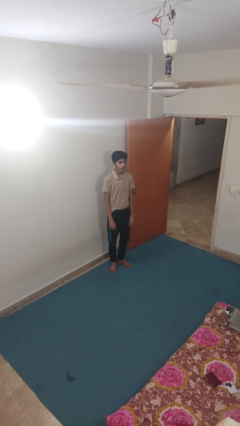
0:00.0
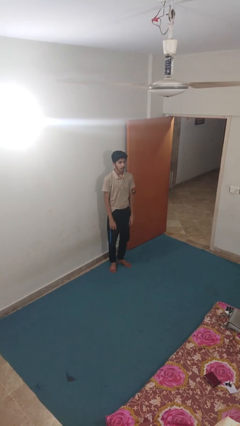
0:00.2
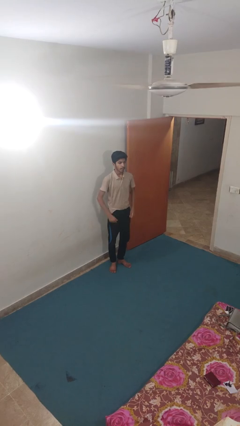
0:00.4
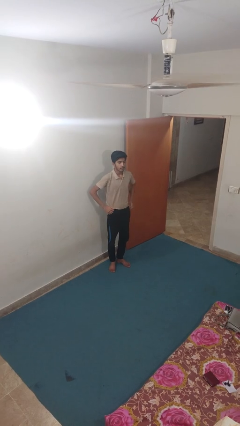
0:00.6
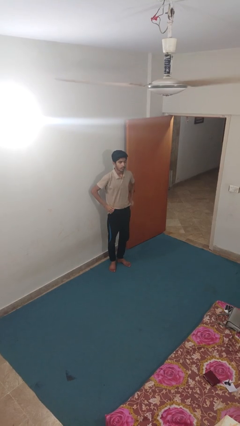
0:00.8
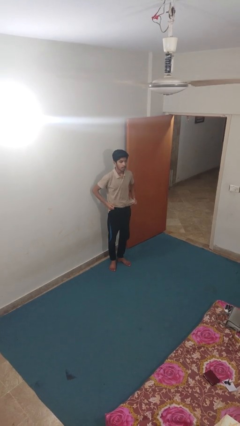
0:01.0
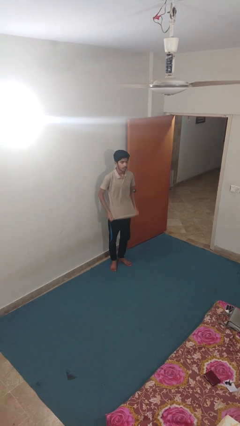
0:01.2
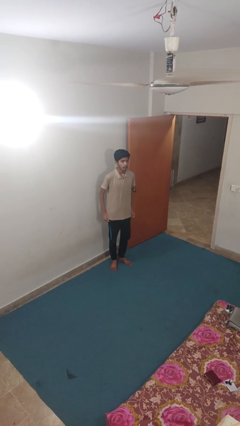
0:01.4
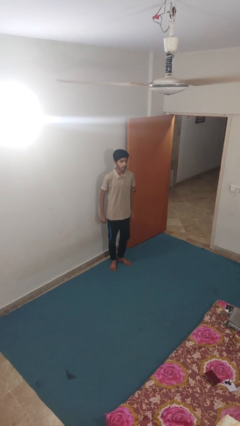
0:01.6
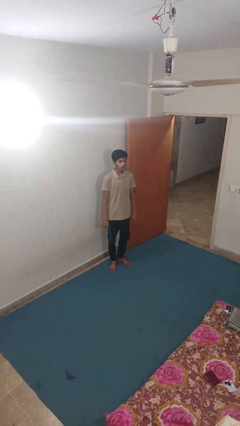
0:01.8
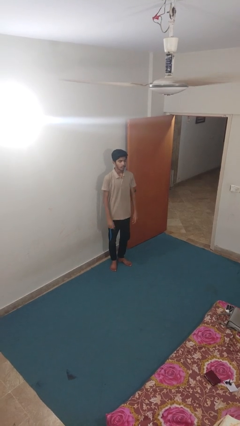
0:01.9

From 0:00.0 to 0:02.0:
person untucks shirt

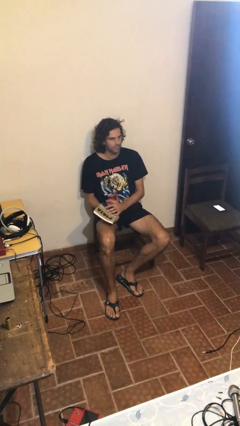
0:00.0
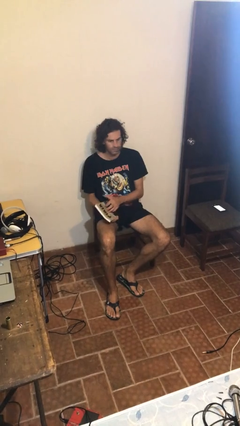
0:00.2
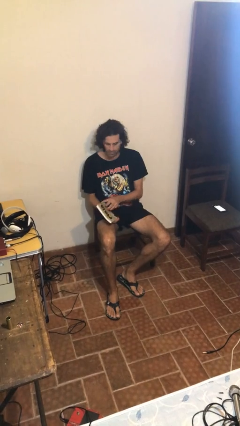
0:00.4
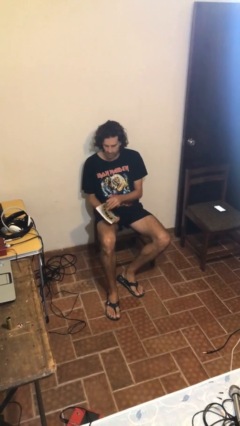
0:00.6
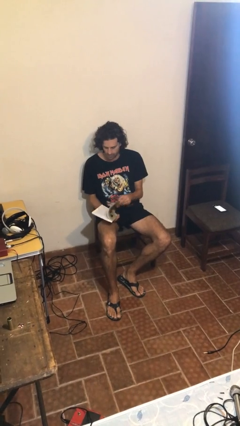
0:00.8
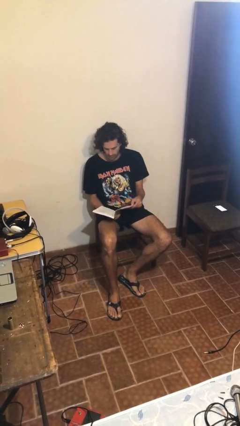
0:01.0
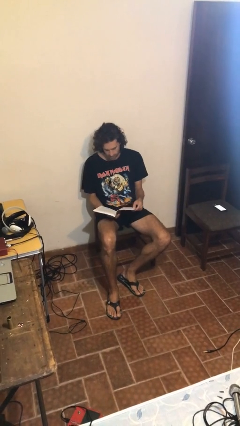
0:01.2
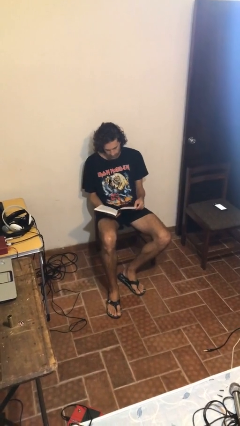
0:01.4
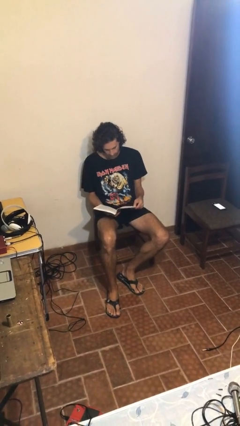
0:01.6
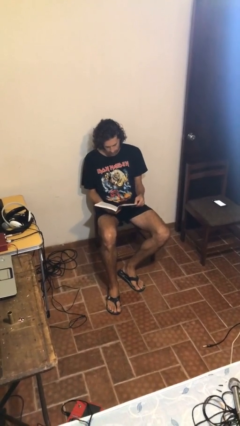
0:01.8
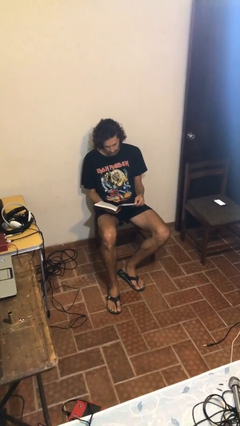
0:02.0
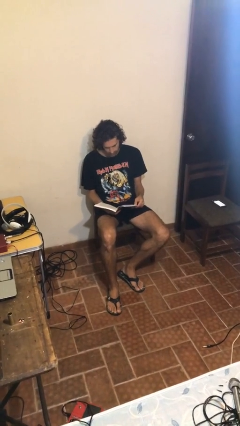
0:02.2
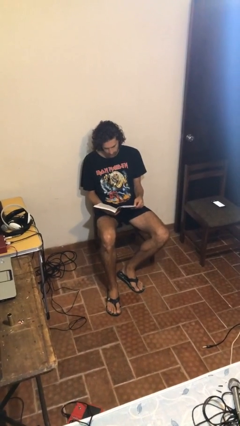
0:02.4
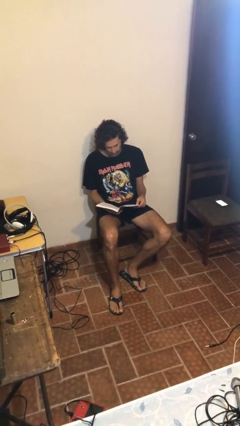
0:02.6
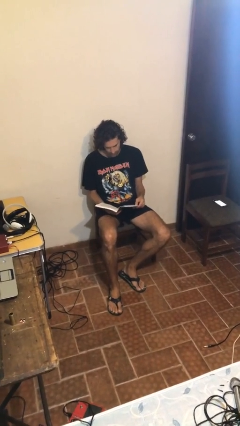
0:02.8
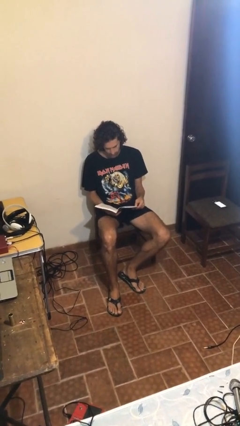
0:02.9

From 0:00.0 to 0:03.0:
person reads document

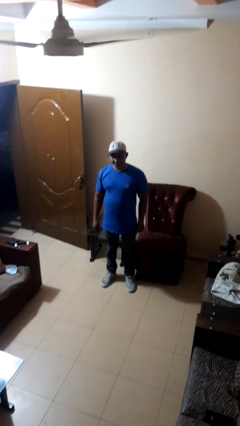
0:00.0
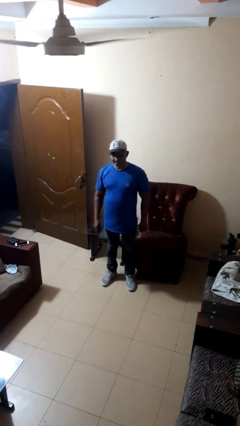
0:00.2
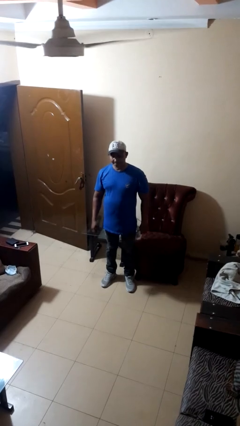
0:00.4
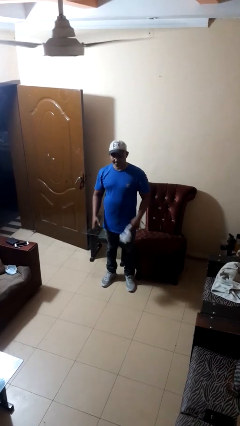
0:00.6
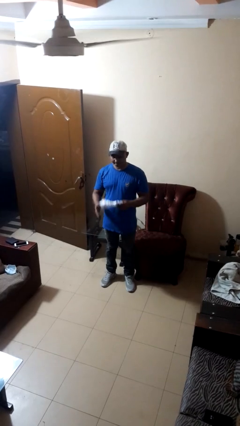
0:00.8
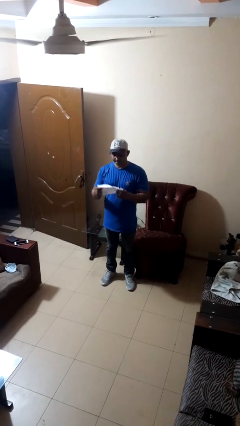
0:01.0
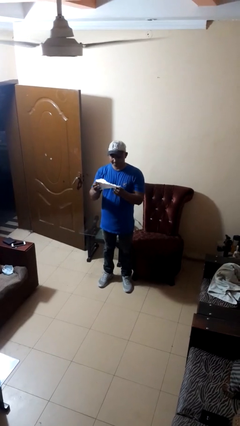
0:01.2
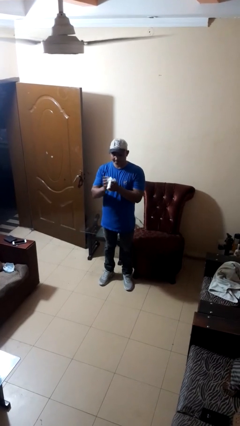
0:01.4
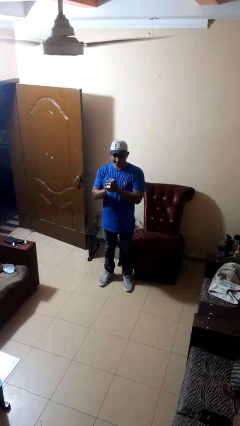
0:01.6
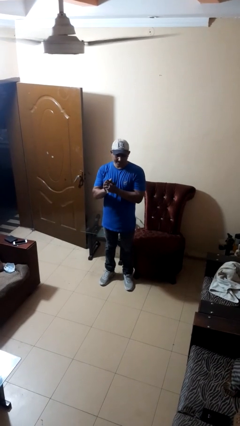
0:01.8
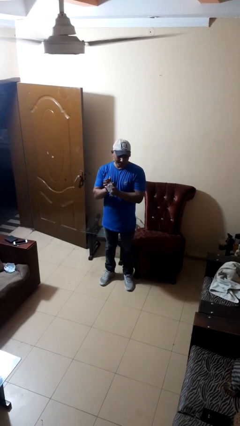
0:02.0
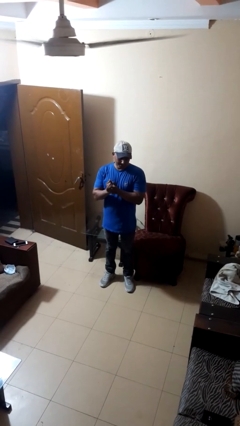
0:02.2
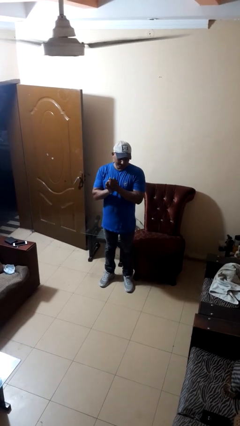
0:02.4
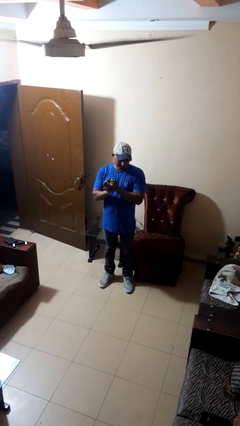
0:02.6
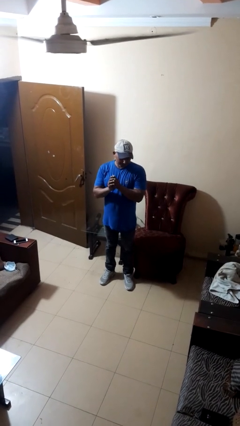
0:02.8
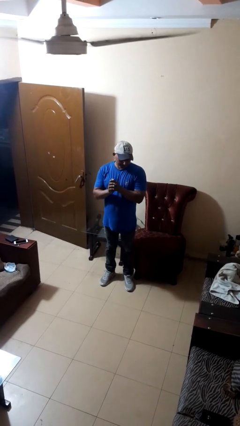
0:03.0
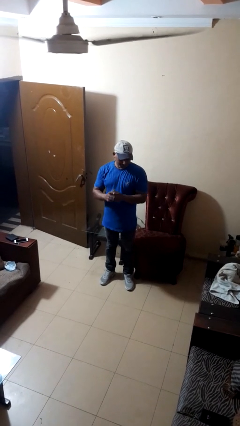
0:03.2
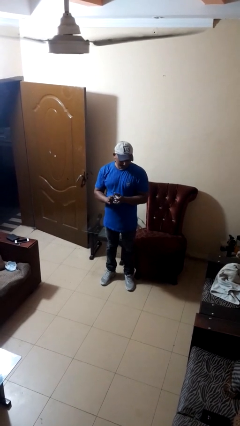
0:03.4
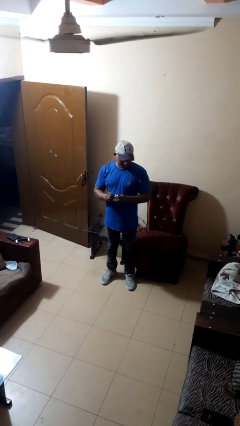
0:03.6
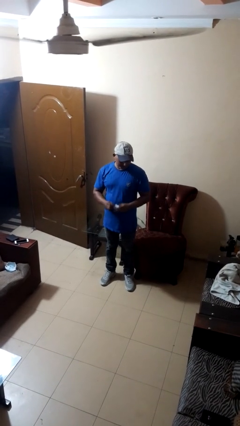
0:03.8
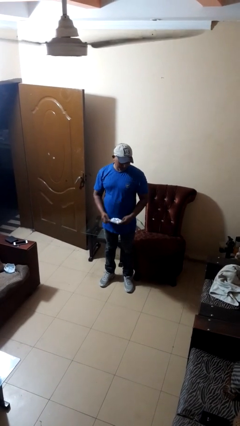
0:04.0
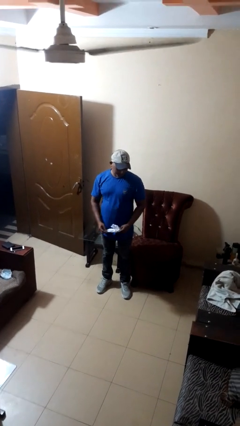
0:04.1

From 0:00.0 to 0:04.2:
person crumples paper

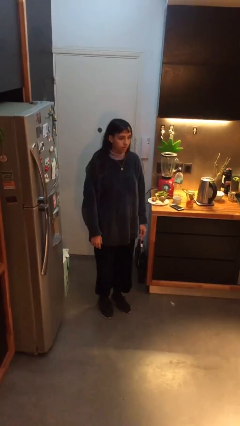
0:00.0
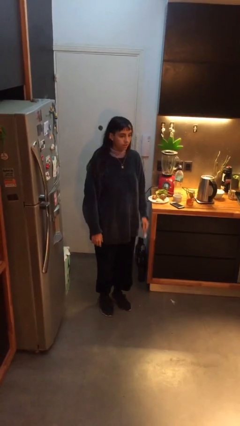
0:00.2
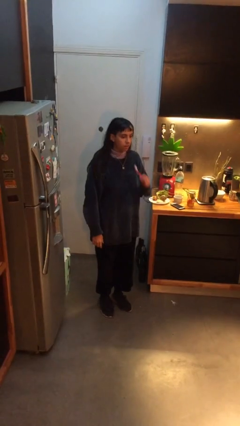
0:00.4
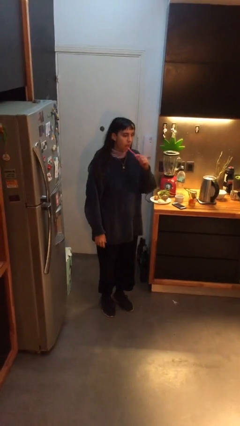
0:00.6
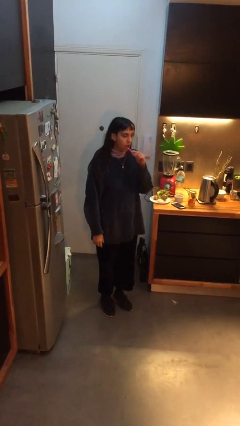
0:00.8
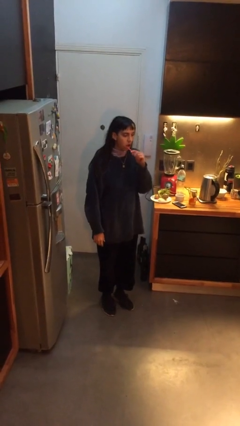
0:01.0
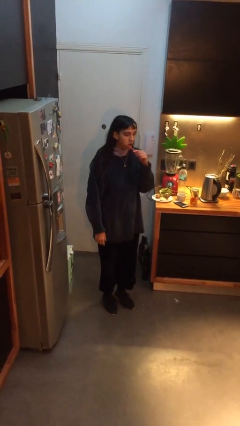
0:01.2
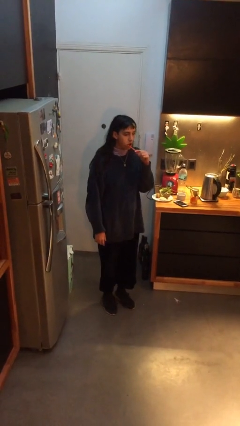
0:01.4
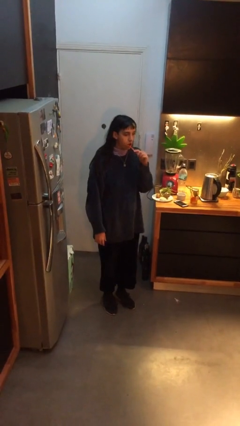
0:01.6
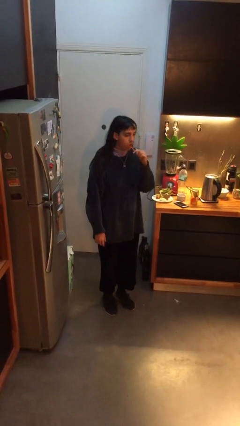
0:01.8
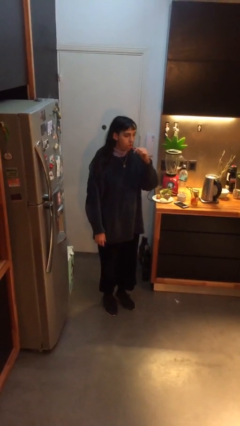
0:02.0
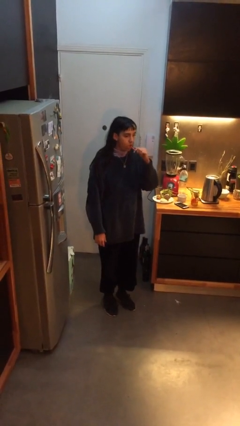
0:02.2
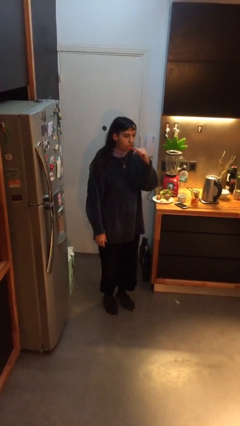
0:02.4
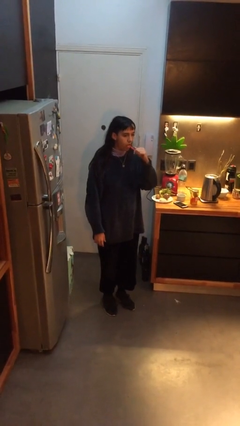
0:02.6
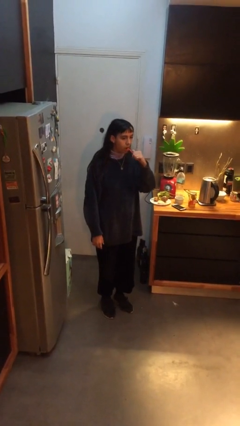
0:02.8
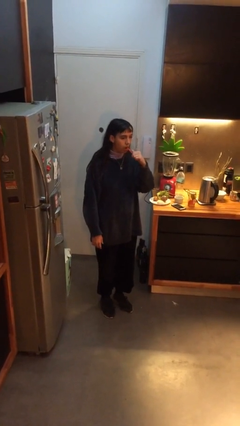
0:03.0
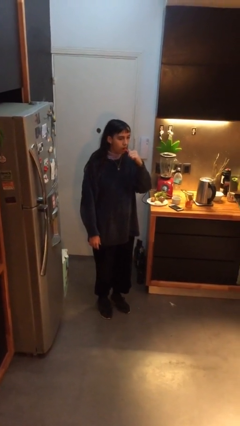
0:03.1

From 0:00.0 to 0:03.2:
person brushes teeth

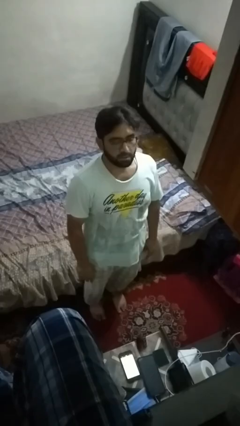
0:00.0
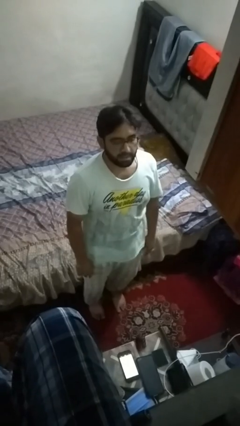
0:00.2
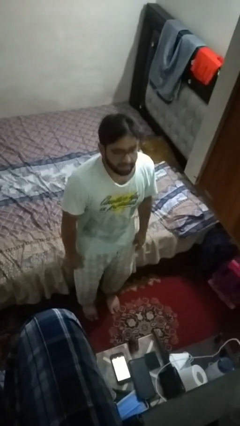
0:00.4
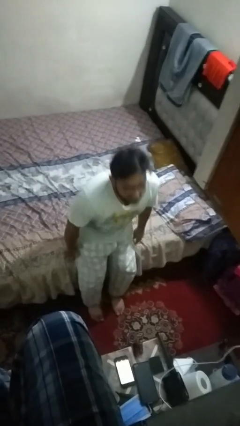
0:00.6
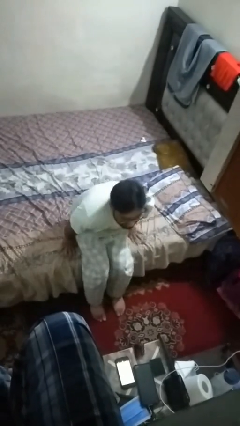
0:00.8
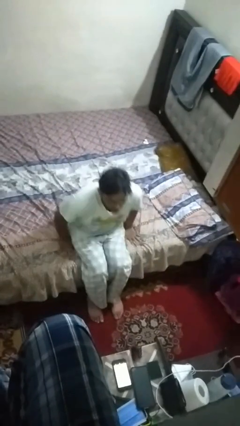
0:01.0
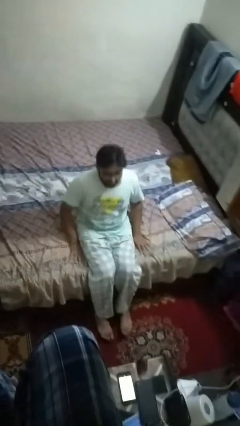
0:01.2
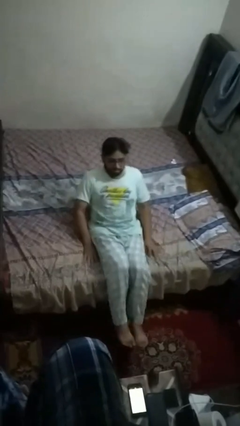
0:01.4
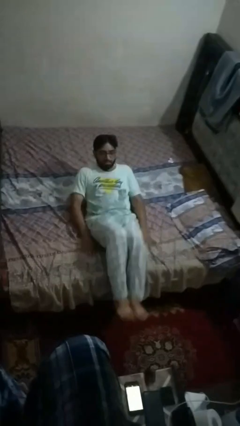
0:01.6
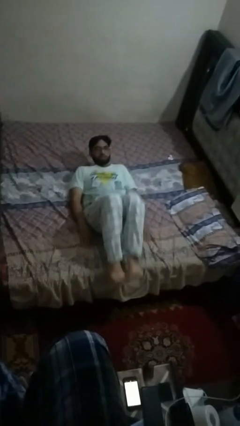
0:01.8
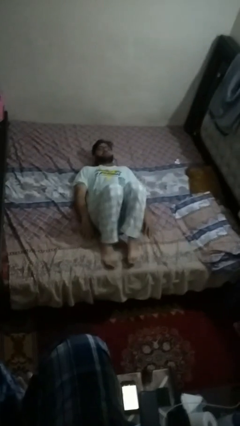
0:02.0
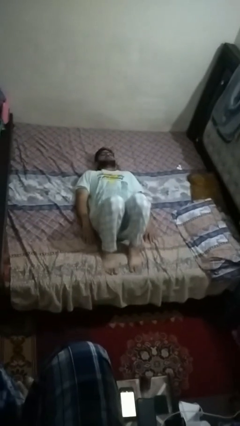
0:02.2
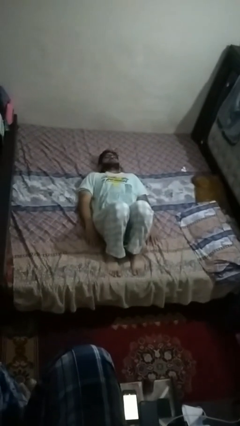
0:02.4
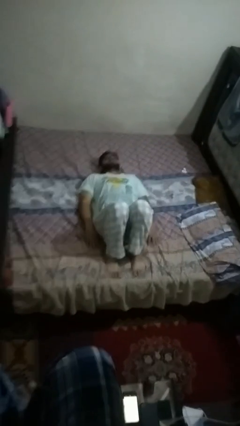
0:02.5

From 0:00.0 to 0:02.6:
person lies down on bed

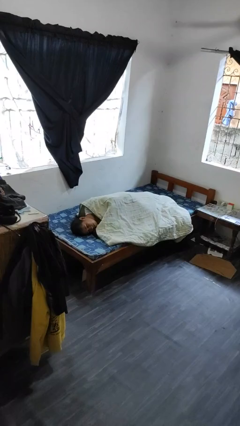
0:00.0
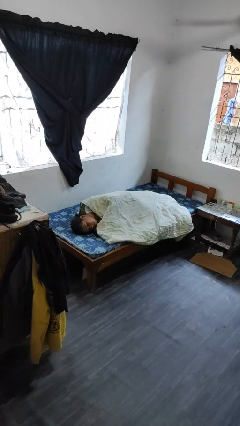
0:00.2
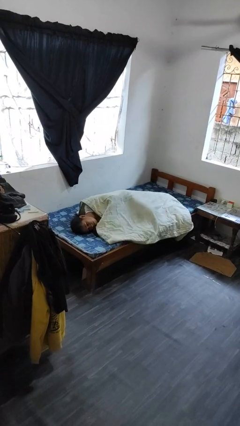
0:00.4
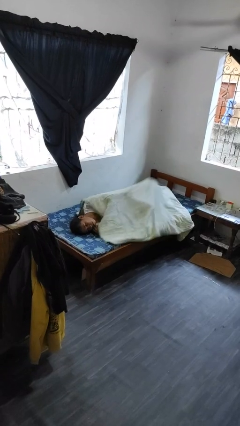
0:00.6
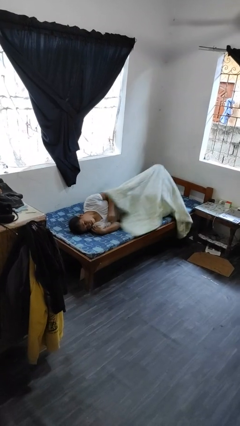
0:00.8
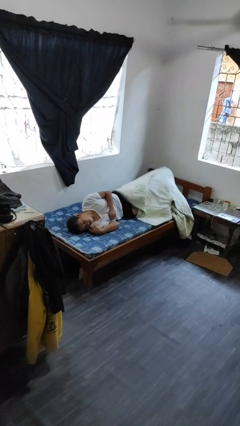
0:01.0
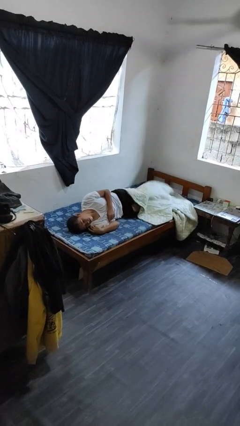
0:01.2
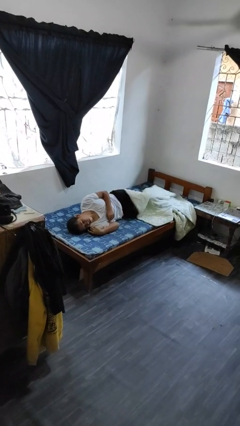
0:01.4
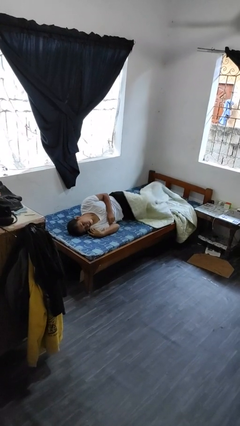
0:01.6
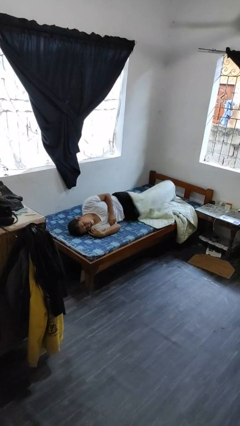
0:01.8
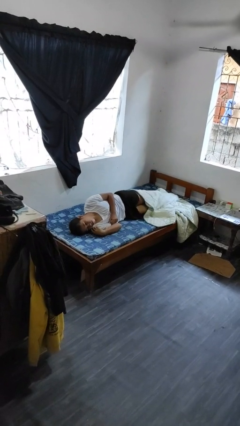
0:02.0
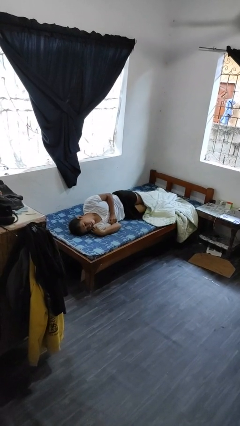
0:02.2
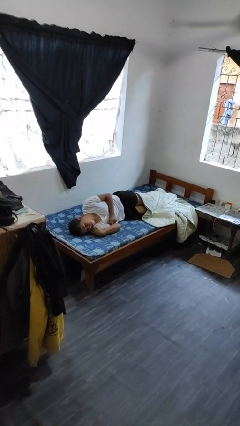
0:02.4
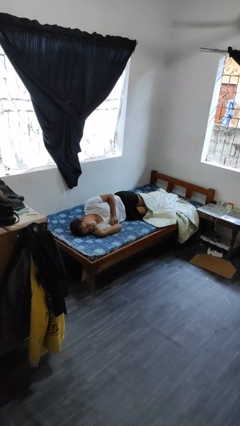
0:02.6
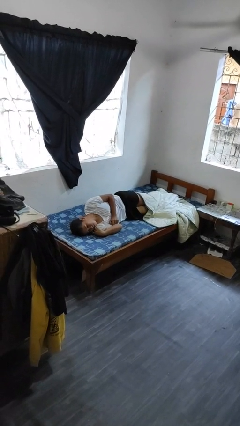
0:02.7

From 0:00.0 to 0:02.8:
person uncovers with bedsheets
